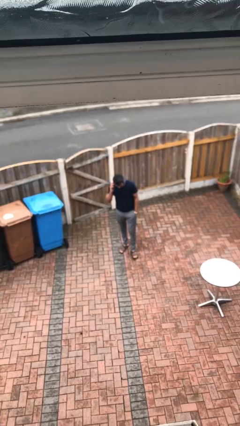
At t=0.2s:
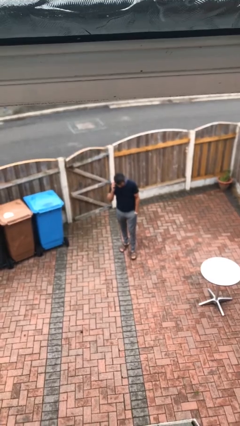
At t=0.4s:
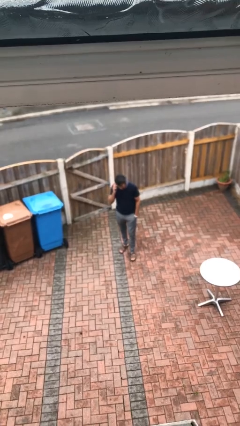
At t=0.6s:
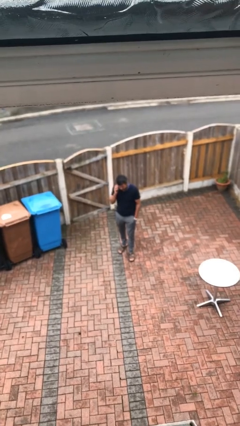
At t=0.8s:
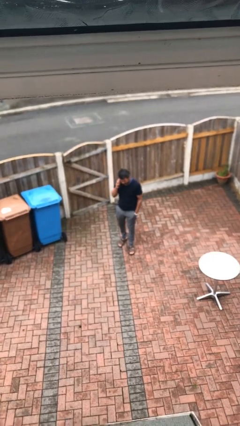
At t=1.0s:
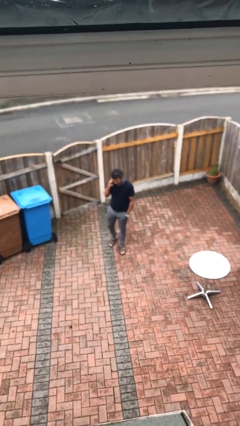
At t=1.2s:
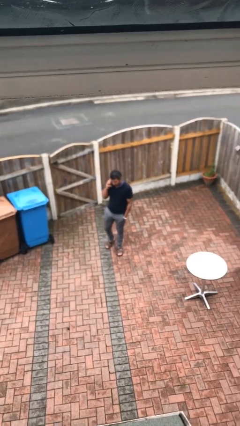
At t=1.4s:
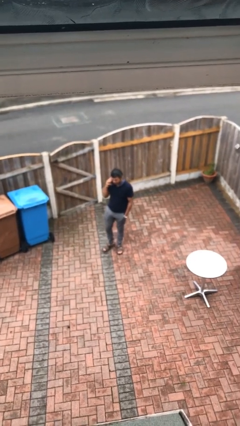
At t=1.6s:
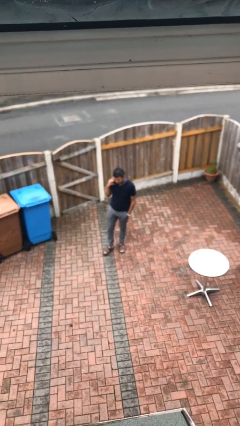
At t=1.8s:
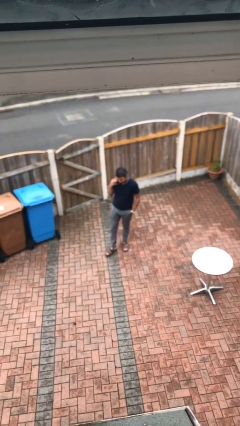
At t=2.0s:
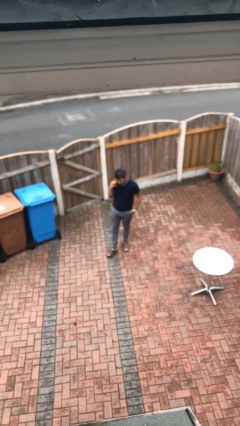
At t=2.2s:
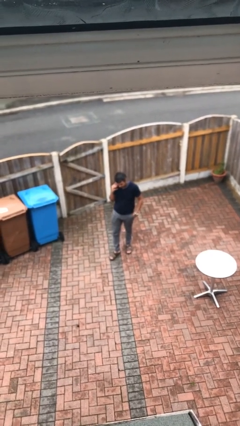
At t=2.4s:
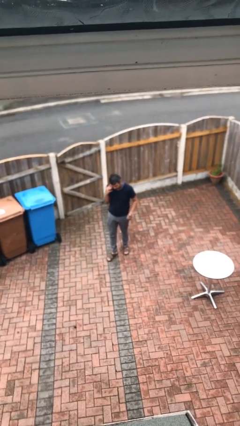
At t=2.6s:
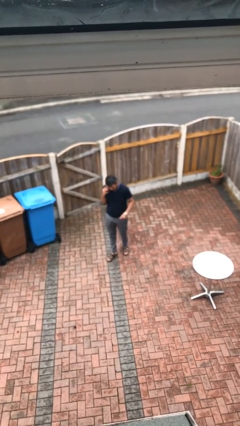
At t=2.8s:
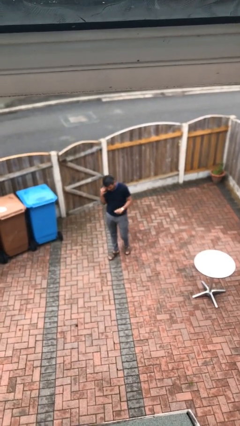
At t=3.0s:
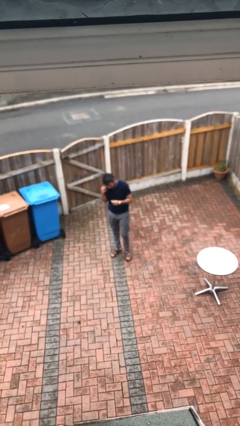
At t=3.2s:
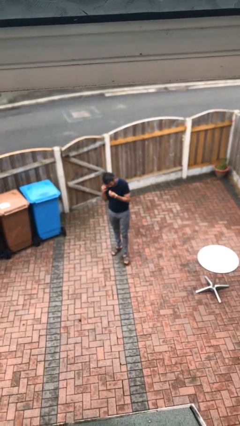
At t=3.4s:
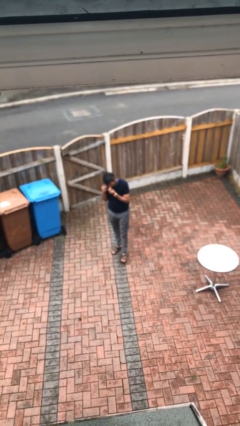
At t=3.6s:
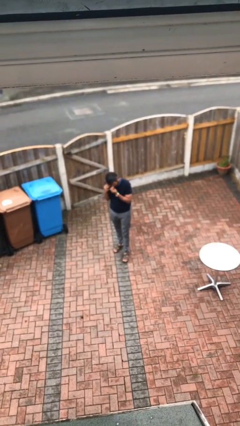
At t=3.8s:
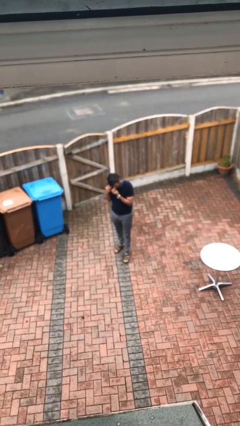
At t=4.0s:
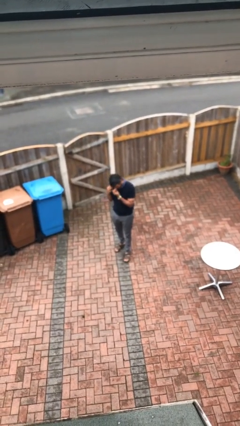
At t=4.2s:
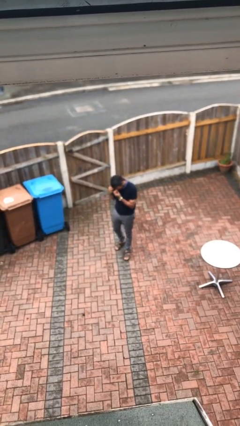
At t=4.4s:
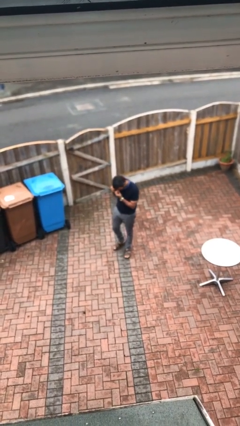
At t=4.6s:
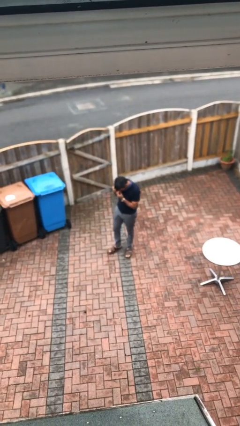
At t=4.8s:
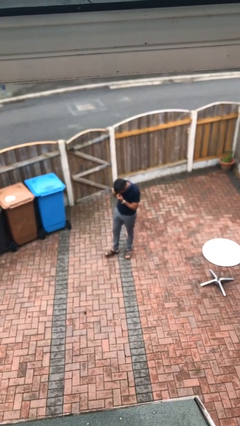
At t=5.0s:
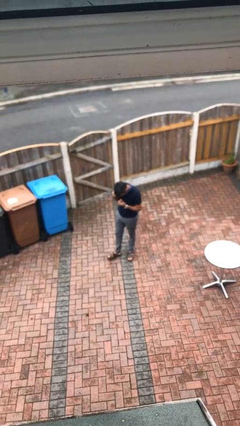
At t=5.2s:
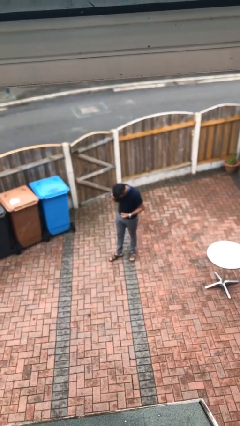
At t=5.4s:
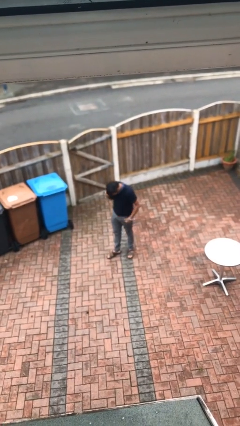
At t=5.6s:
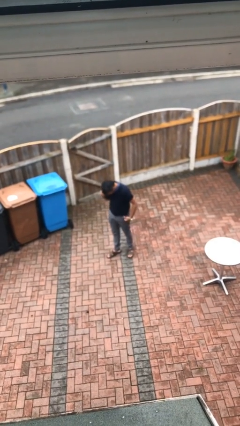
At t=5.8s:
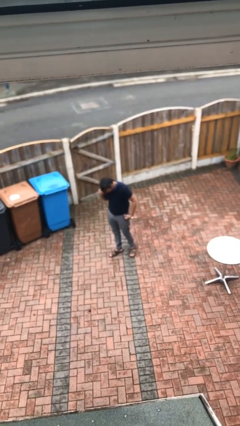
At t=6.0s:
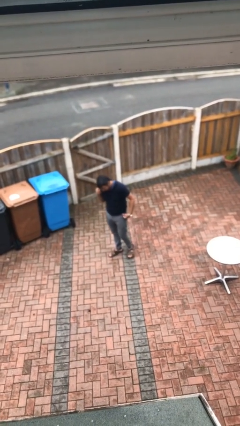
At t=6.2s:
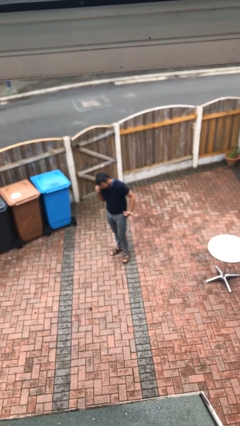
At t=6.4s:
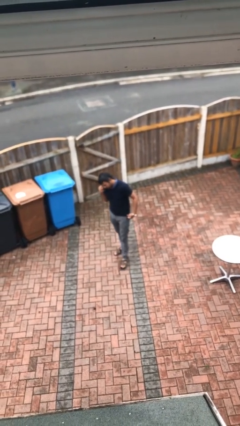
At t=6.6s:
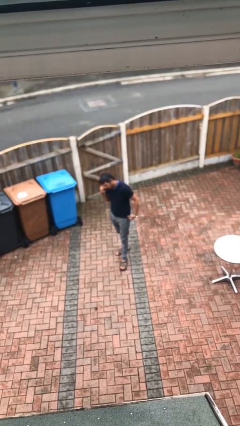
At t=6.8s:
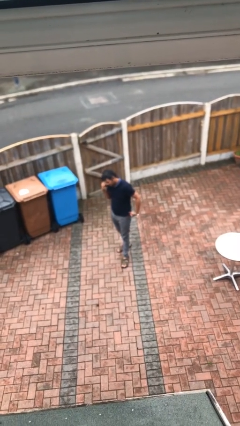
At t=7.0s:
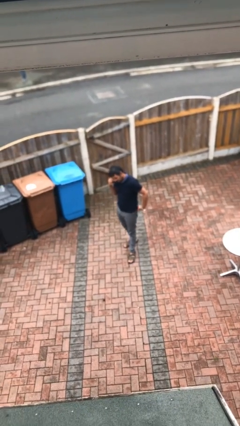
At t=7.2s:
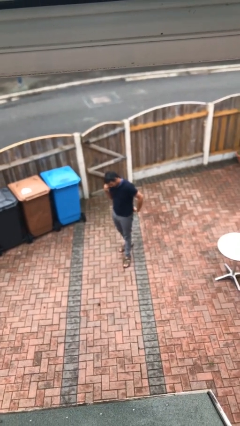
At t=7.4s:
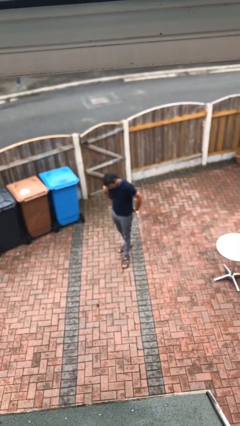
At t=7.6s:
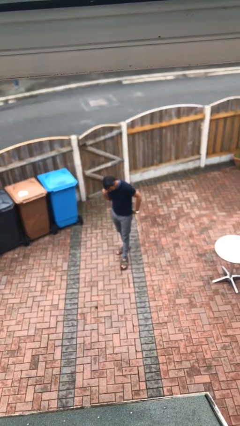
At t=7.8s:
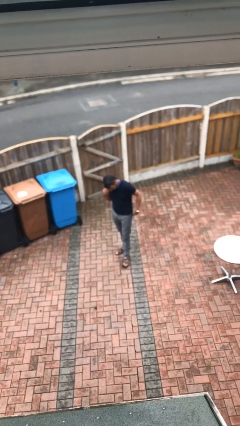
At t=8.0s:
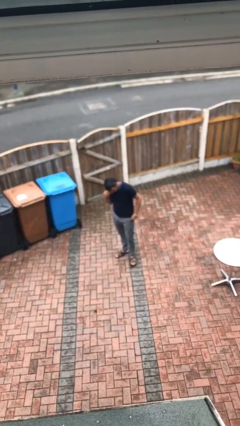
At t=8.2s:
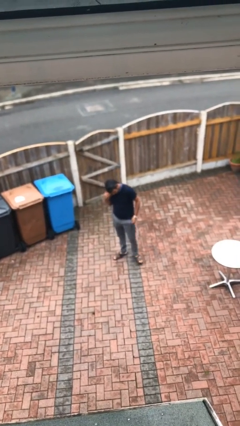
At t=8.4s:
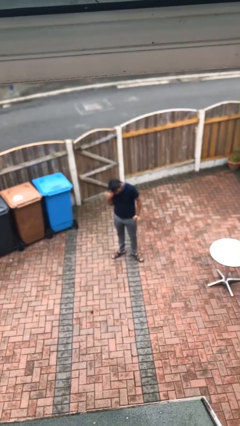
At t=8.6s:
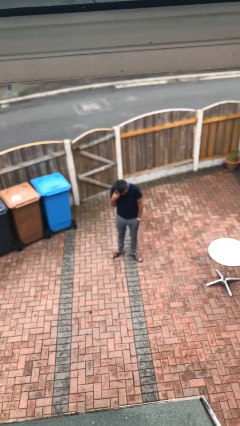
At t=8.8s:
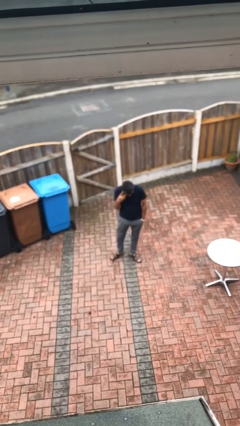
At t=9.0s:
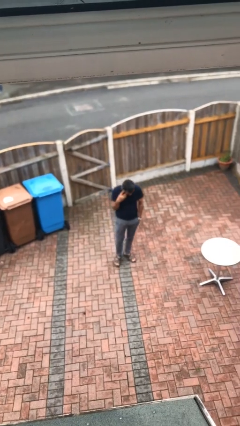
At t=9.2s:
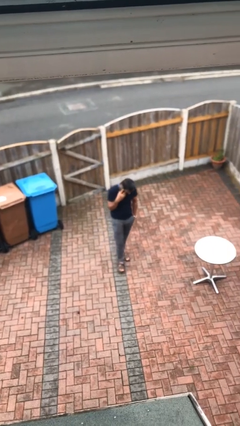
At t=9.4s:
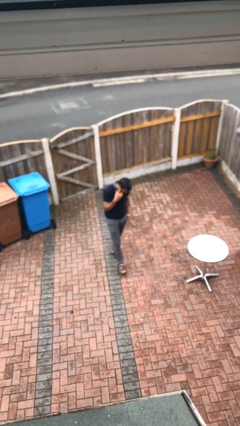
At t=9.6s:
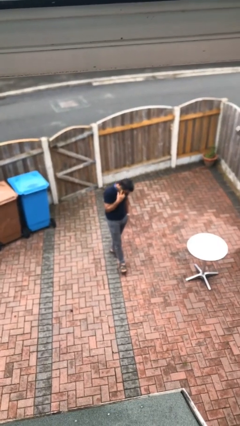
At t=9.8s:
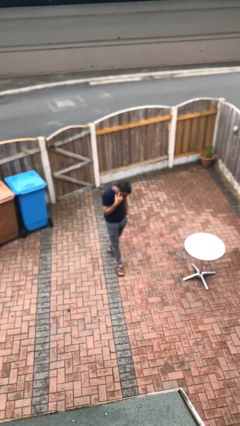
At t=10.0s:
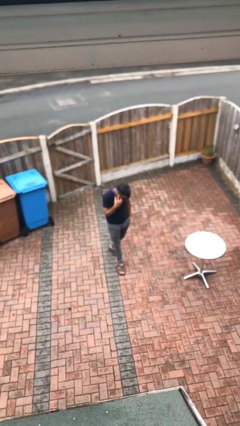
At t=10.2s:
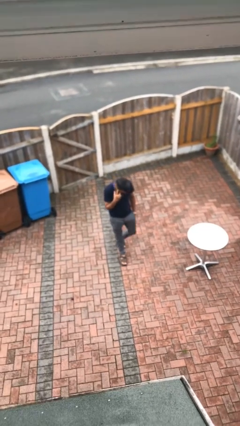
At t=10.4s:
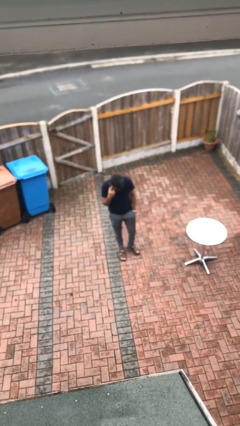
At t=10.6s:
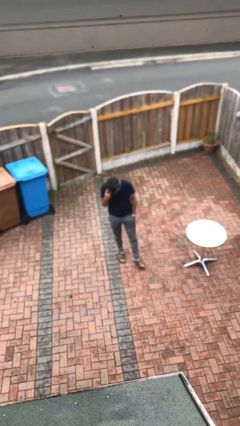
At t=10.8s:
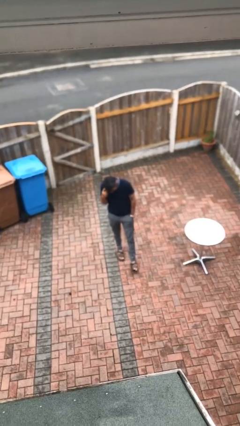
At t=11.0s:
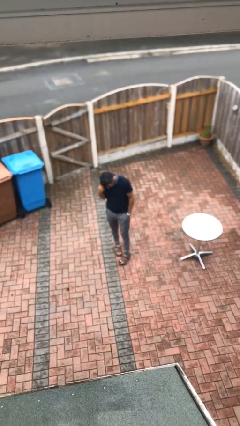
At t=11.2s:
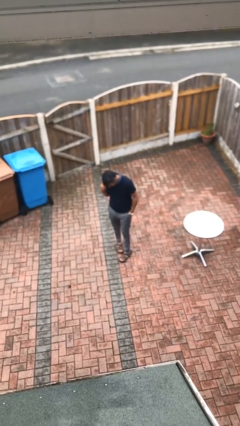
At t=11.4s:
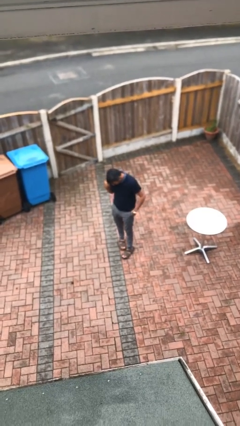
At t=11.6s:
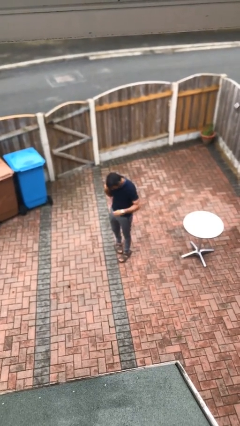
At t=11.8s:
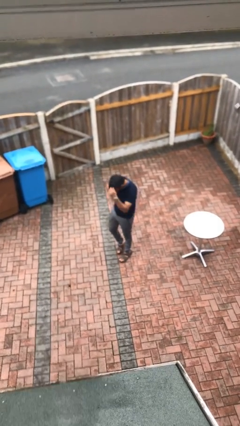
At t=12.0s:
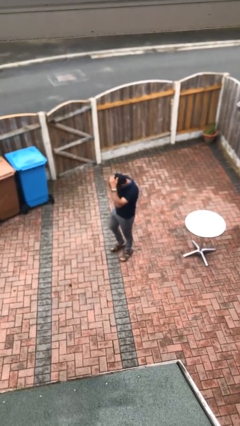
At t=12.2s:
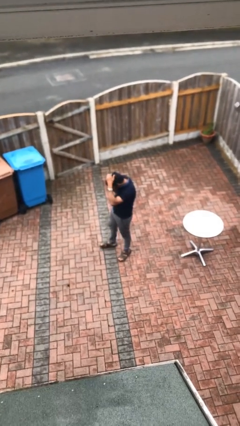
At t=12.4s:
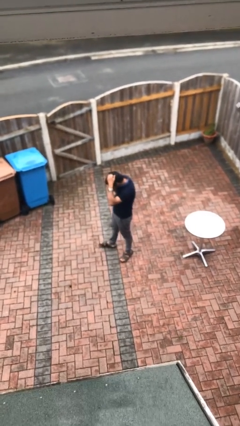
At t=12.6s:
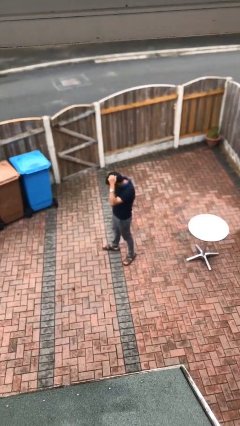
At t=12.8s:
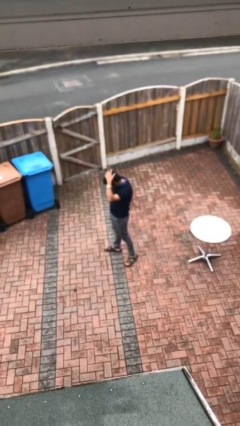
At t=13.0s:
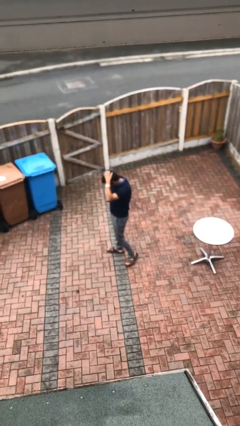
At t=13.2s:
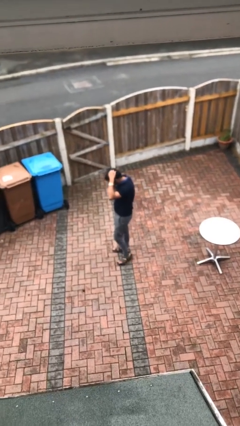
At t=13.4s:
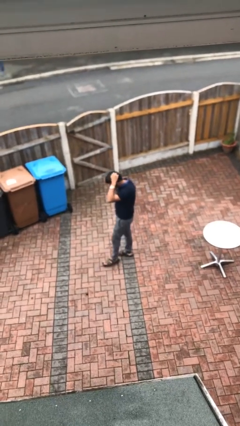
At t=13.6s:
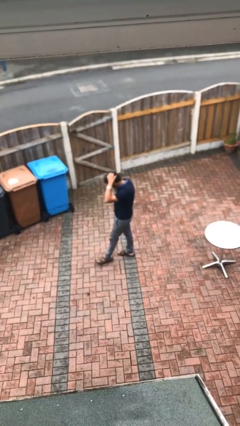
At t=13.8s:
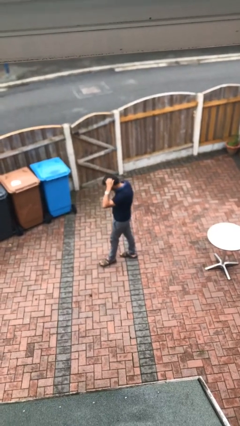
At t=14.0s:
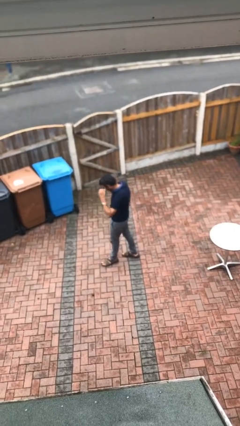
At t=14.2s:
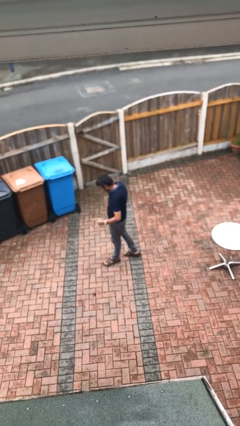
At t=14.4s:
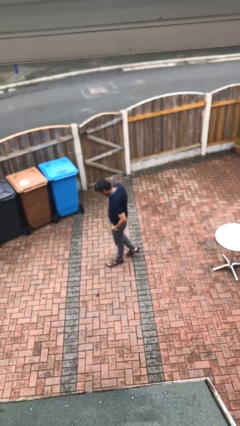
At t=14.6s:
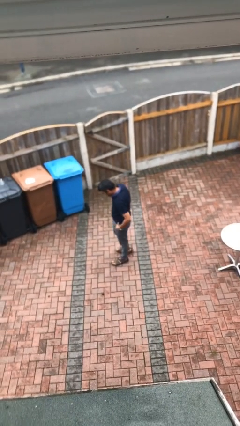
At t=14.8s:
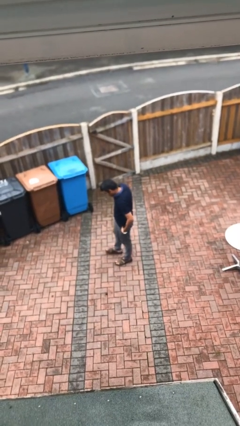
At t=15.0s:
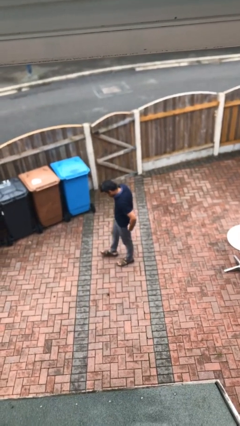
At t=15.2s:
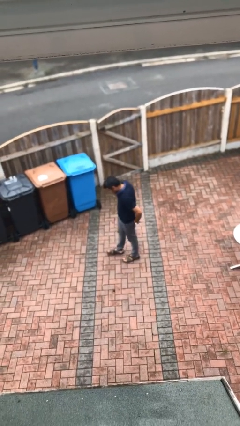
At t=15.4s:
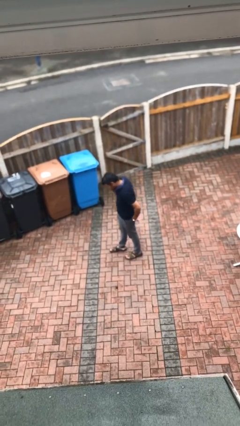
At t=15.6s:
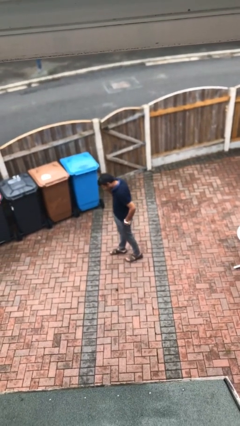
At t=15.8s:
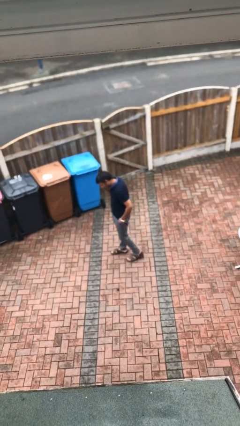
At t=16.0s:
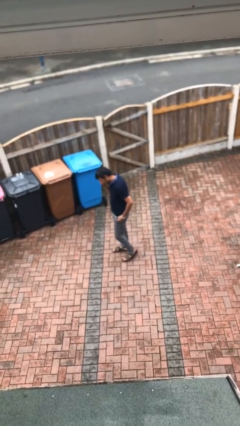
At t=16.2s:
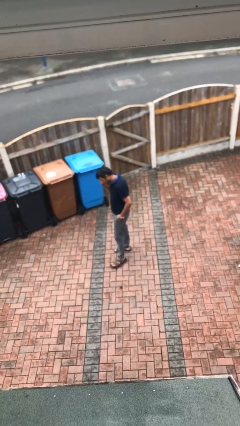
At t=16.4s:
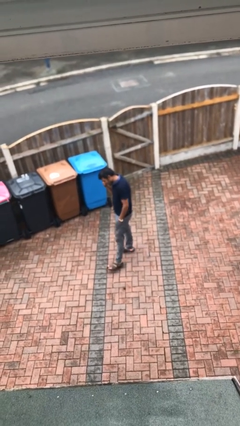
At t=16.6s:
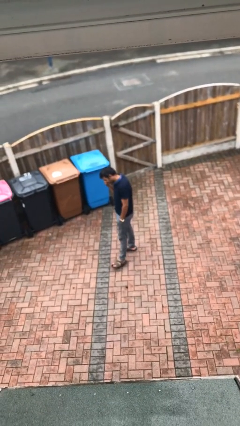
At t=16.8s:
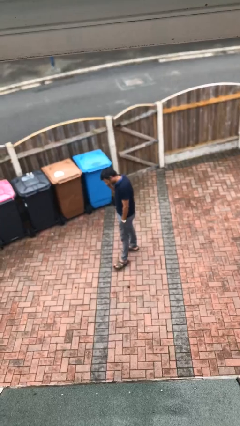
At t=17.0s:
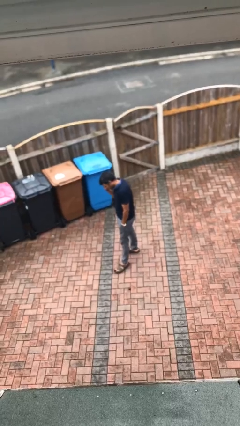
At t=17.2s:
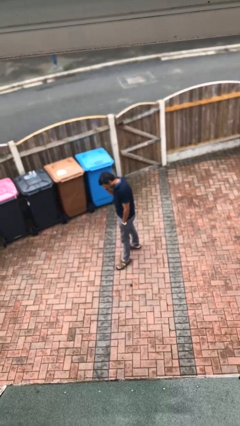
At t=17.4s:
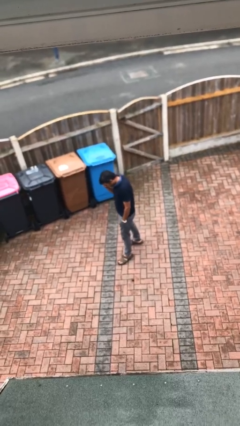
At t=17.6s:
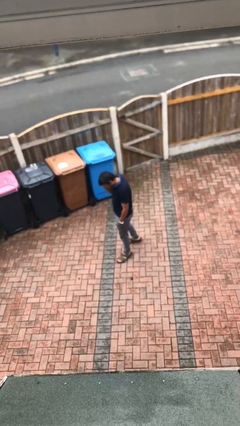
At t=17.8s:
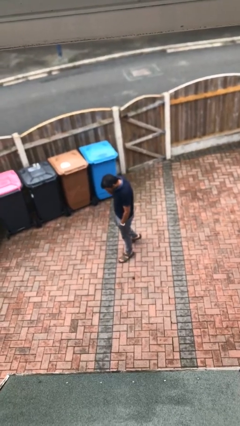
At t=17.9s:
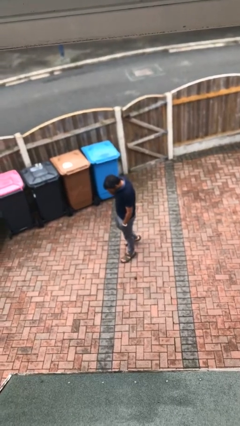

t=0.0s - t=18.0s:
person talks on phone

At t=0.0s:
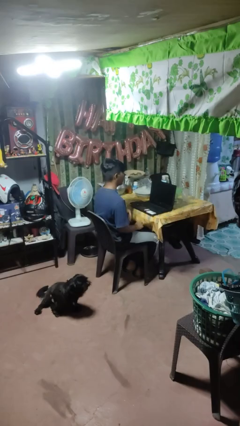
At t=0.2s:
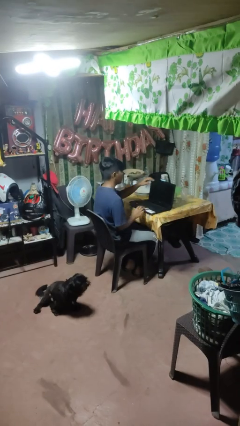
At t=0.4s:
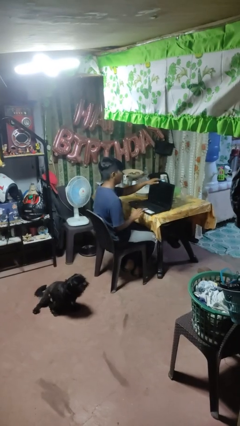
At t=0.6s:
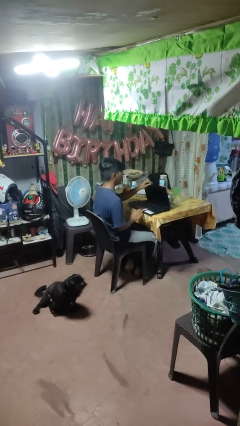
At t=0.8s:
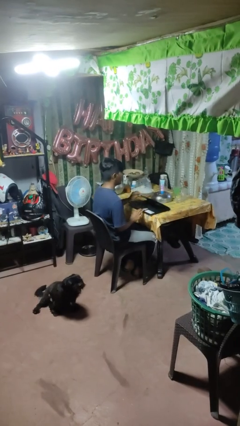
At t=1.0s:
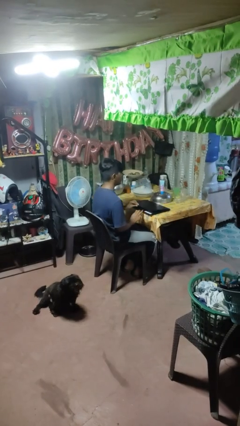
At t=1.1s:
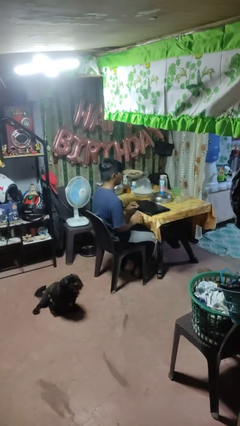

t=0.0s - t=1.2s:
person closes laptop
